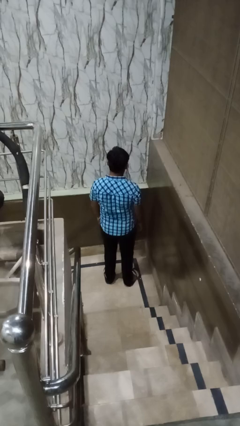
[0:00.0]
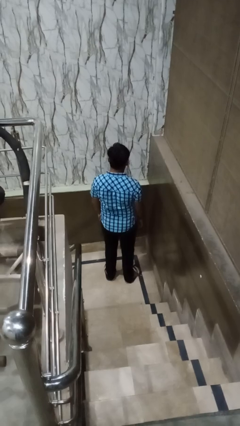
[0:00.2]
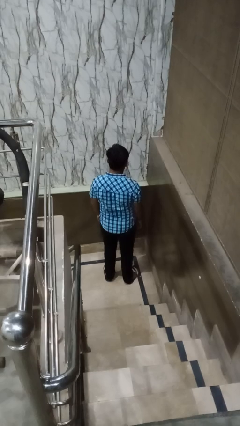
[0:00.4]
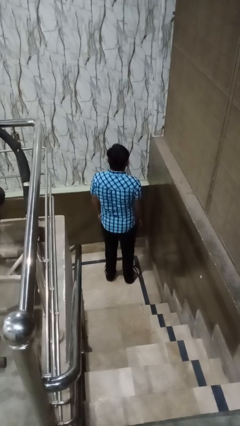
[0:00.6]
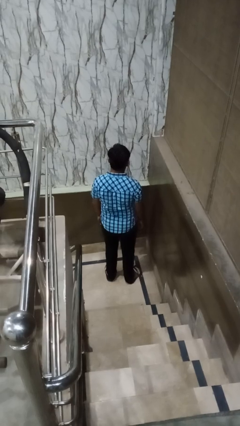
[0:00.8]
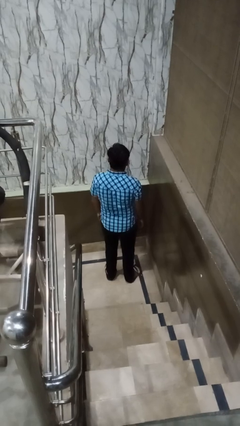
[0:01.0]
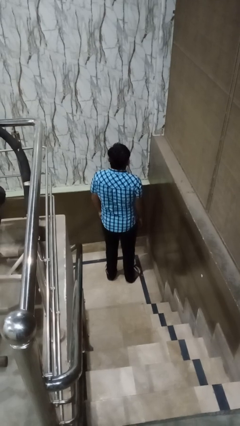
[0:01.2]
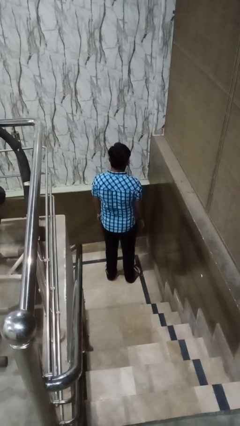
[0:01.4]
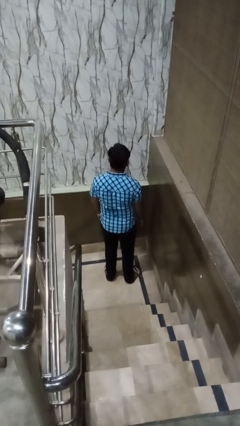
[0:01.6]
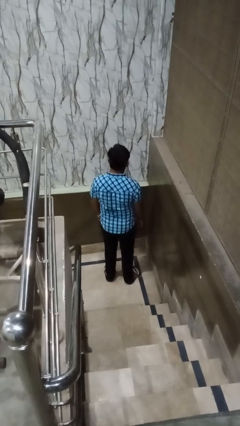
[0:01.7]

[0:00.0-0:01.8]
person shrugs

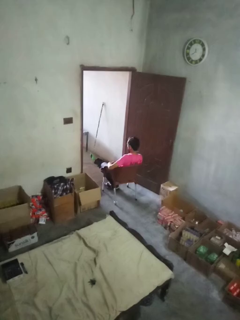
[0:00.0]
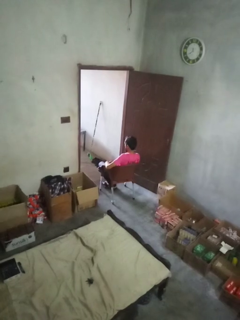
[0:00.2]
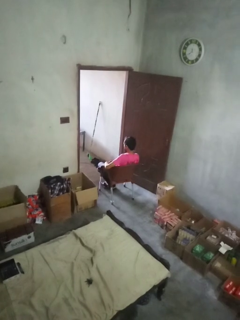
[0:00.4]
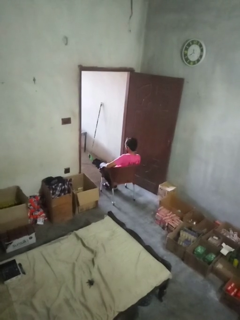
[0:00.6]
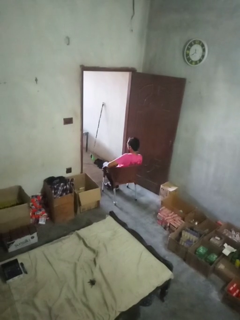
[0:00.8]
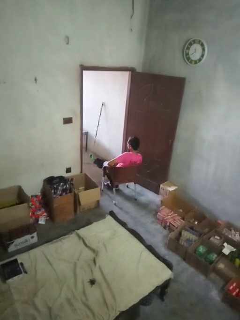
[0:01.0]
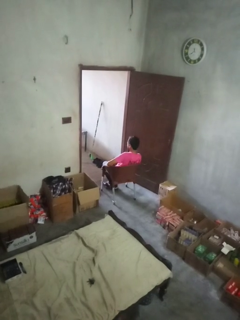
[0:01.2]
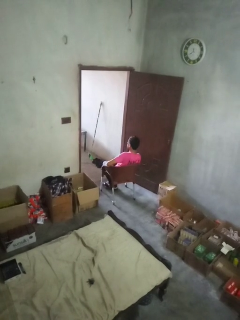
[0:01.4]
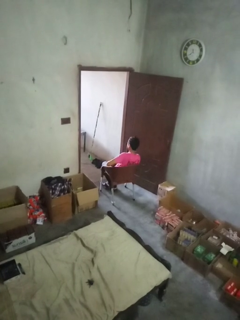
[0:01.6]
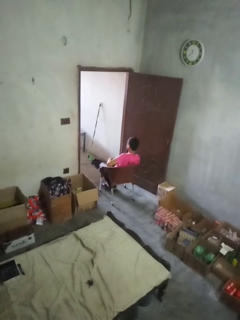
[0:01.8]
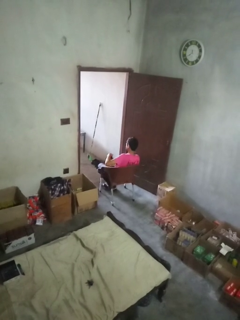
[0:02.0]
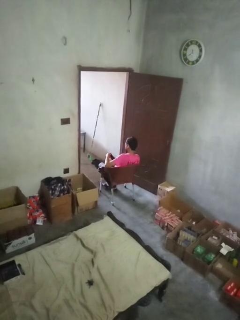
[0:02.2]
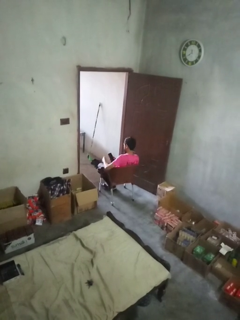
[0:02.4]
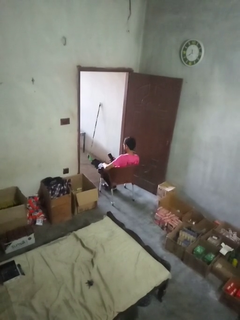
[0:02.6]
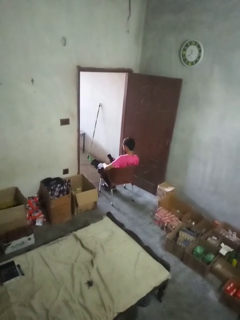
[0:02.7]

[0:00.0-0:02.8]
person takes phone from pocket

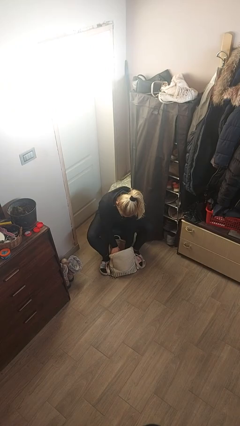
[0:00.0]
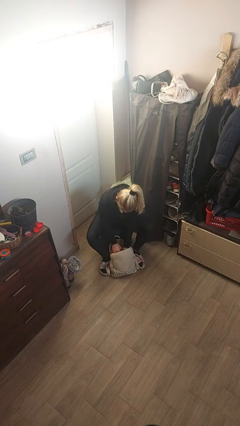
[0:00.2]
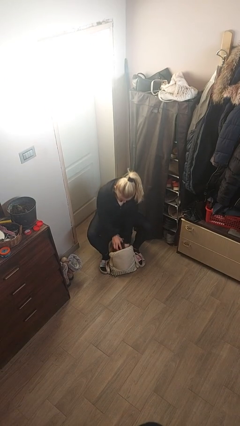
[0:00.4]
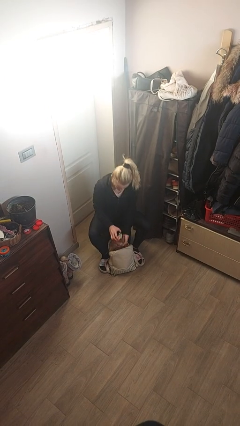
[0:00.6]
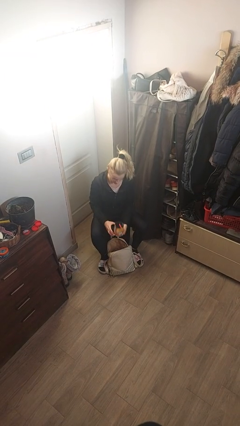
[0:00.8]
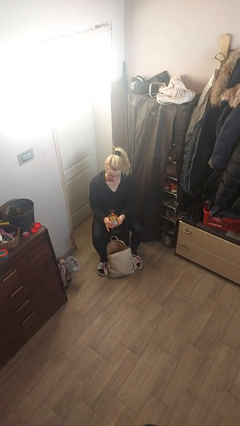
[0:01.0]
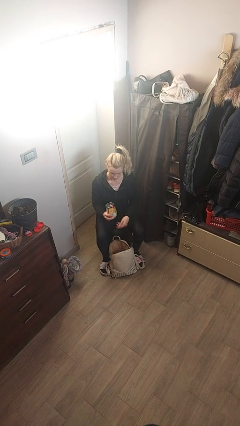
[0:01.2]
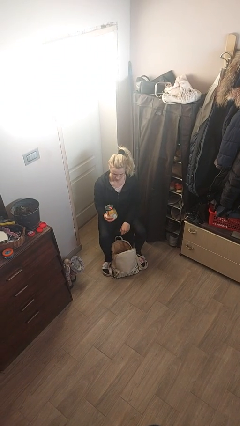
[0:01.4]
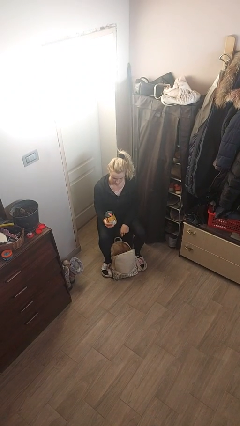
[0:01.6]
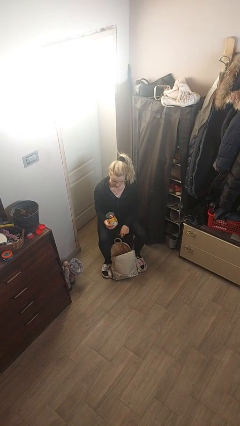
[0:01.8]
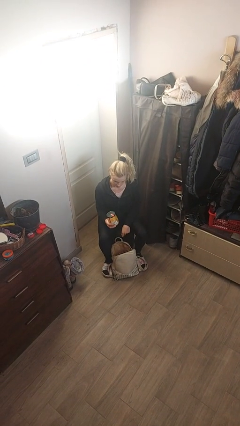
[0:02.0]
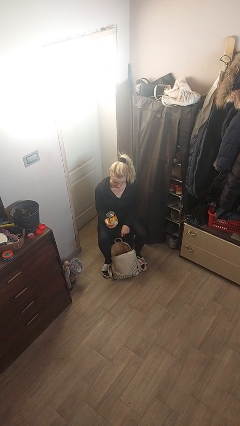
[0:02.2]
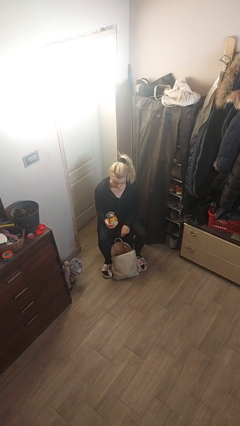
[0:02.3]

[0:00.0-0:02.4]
person takes object from backpack

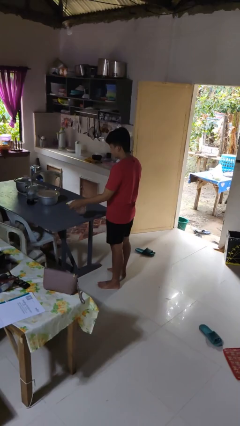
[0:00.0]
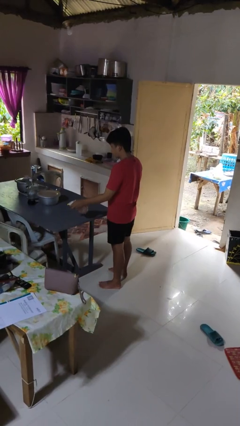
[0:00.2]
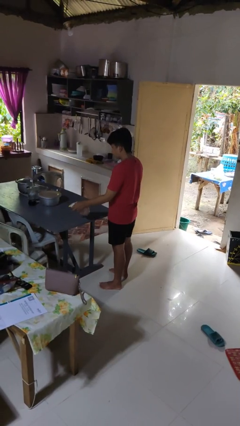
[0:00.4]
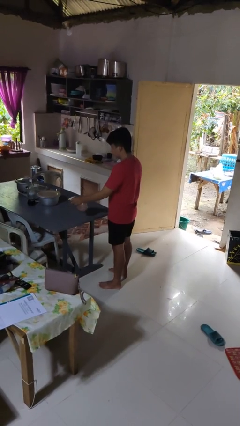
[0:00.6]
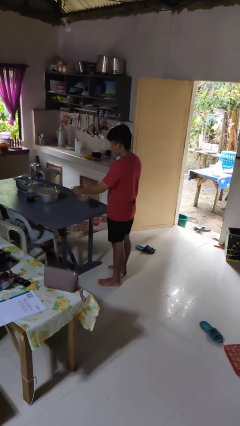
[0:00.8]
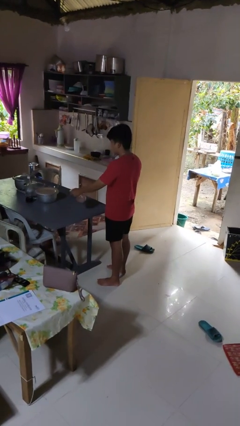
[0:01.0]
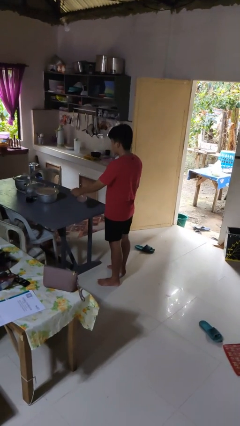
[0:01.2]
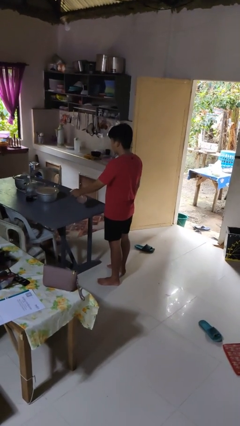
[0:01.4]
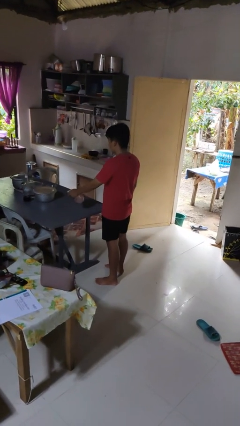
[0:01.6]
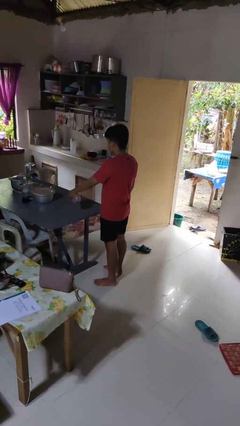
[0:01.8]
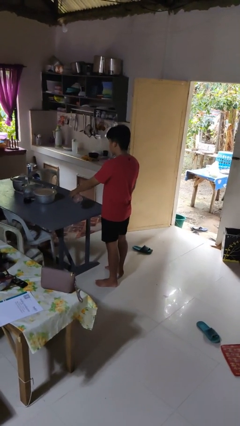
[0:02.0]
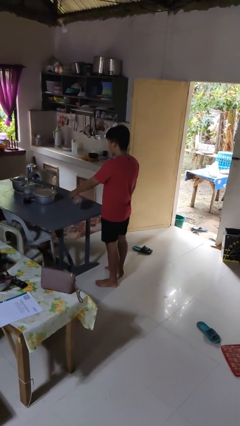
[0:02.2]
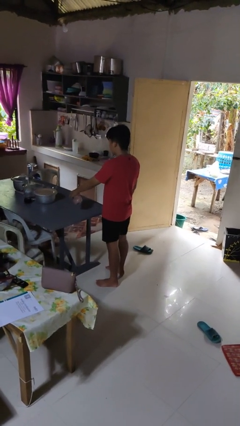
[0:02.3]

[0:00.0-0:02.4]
person sprays from bottle

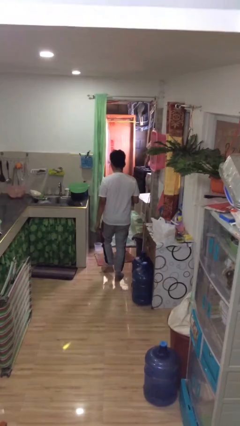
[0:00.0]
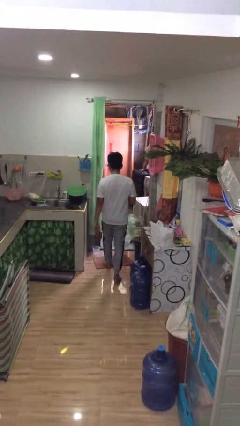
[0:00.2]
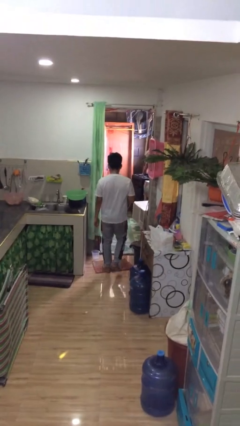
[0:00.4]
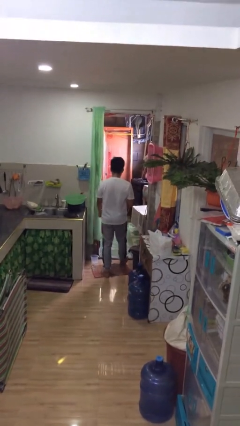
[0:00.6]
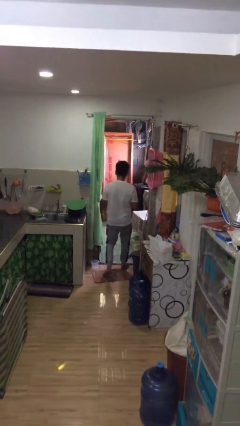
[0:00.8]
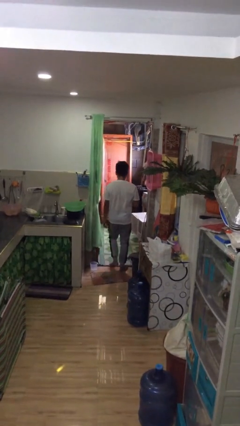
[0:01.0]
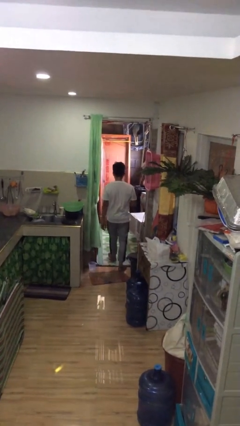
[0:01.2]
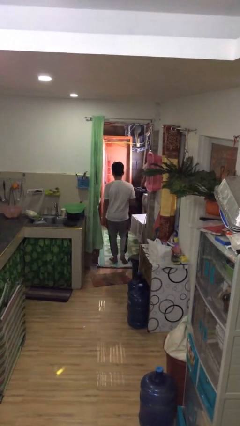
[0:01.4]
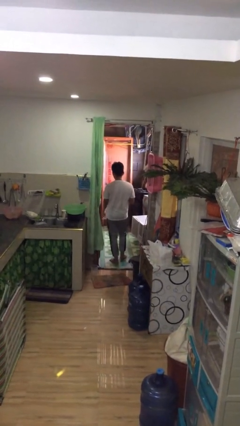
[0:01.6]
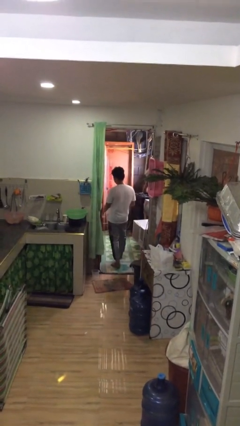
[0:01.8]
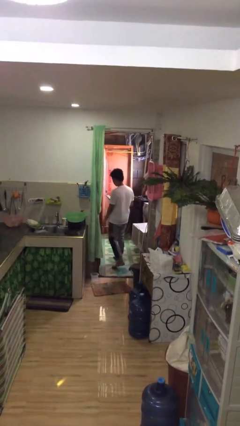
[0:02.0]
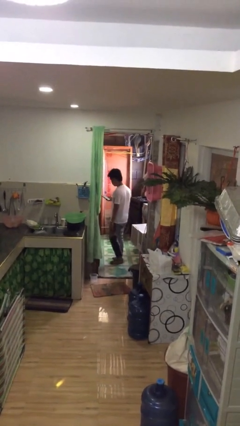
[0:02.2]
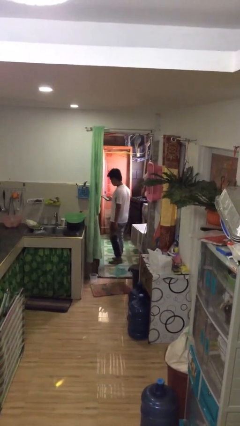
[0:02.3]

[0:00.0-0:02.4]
person exits scene through structure

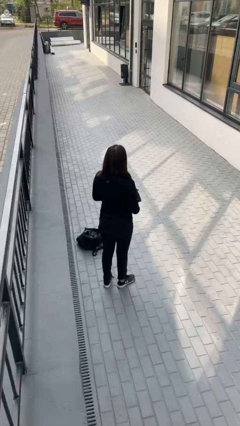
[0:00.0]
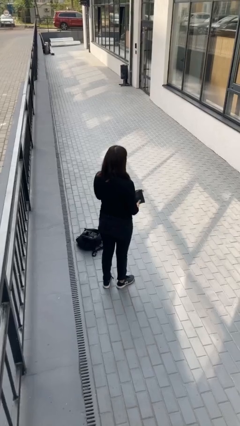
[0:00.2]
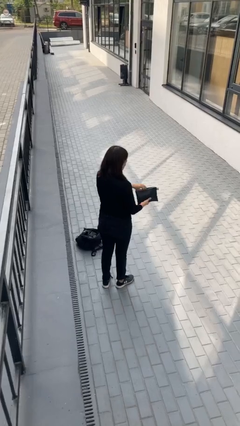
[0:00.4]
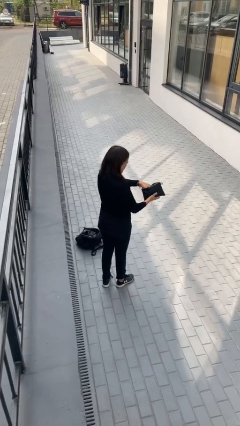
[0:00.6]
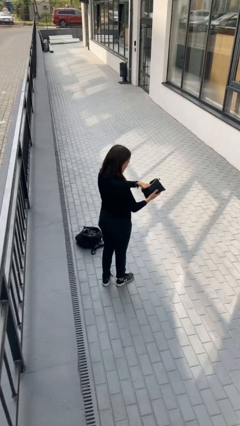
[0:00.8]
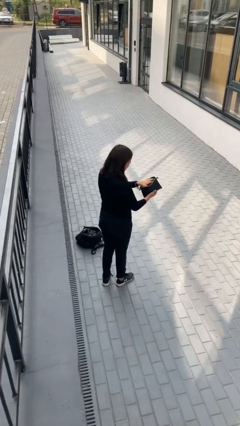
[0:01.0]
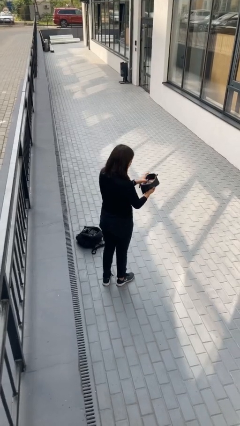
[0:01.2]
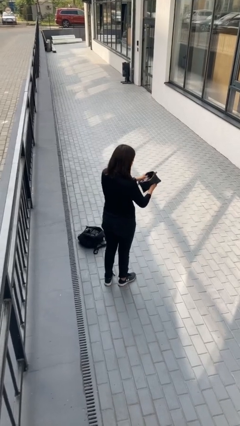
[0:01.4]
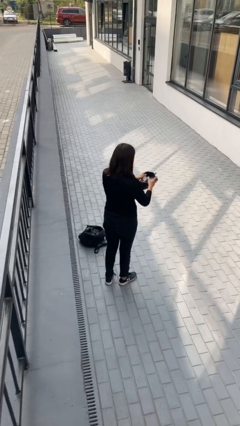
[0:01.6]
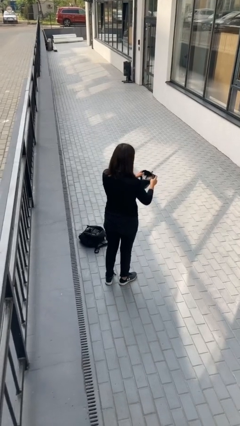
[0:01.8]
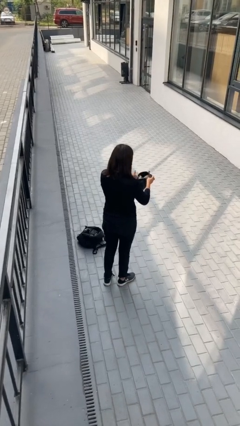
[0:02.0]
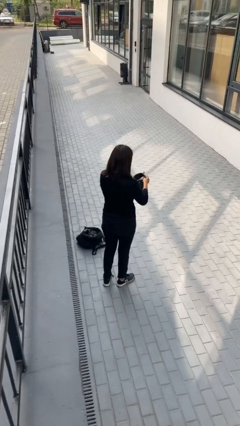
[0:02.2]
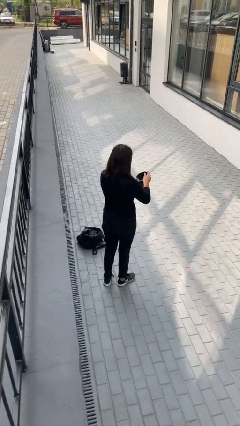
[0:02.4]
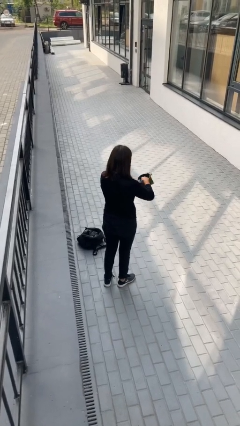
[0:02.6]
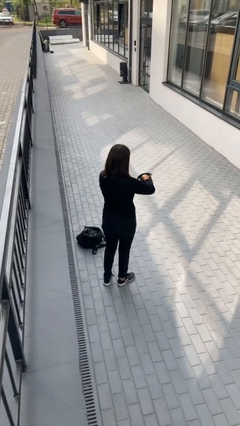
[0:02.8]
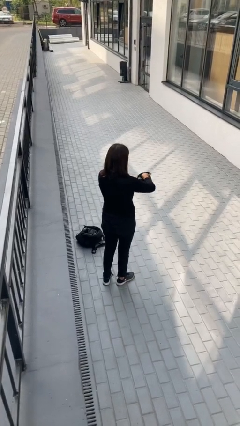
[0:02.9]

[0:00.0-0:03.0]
person searches in purse

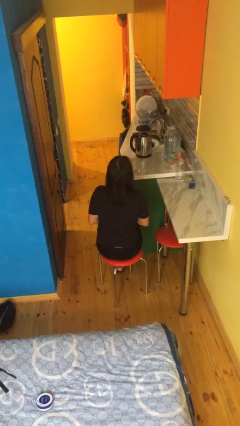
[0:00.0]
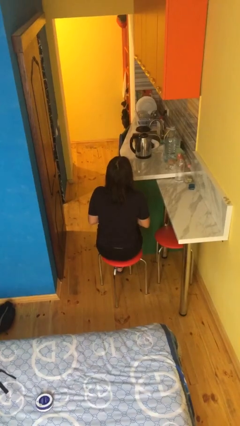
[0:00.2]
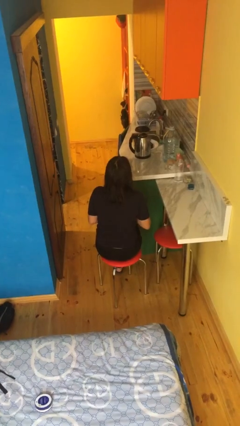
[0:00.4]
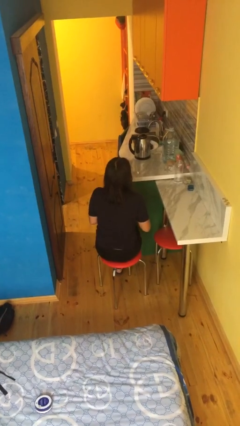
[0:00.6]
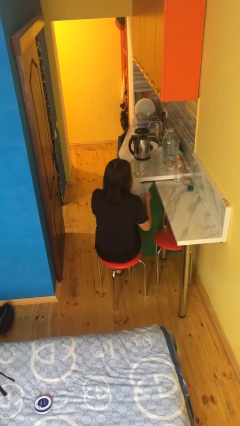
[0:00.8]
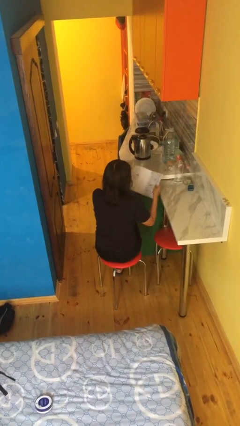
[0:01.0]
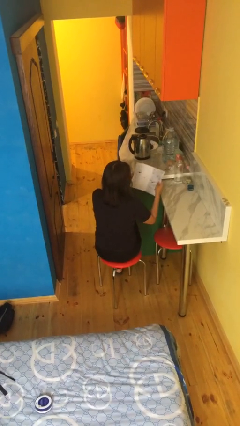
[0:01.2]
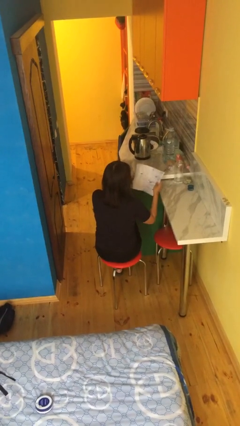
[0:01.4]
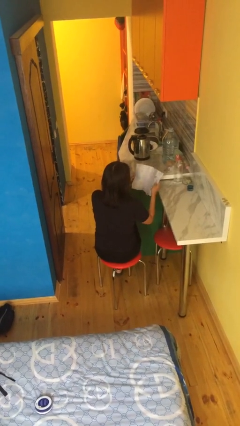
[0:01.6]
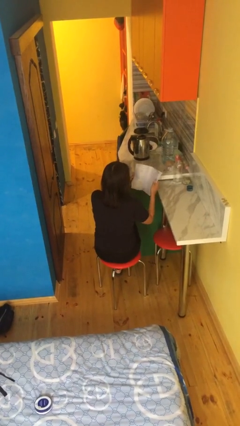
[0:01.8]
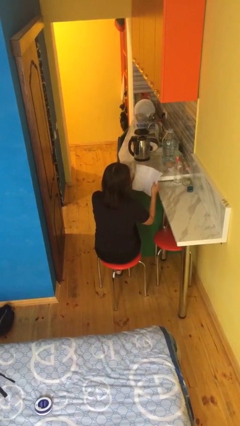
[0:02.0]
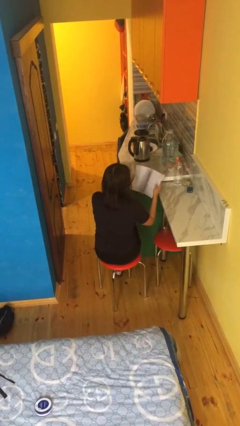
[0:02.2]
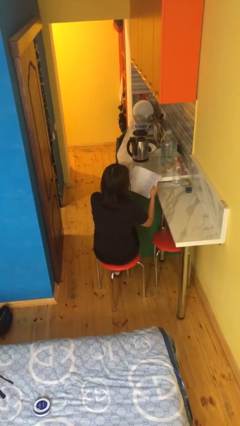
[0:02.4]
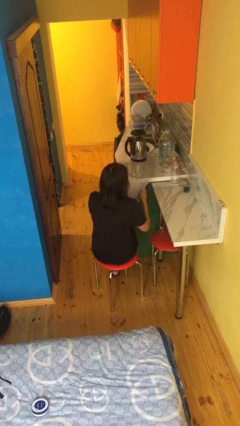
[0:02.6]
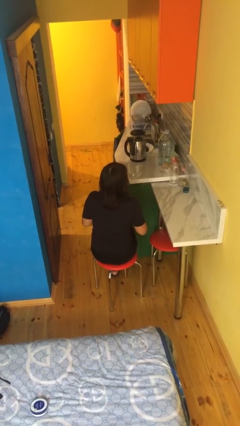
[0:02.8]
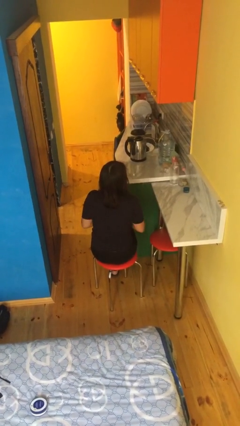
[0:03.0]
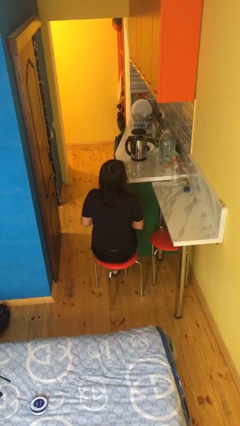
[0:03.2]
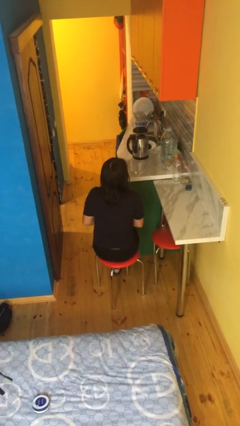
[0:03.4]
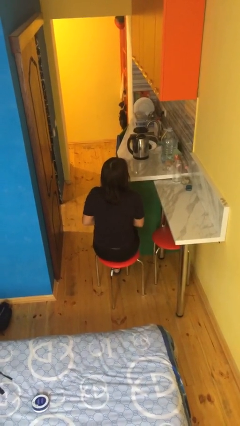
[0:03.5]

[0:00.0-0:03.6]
person reads book
